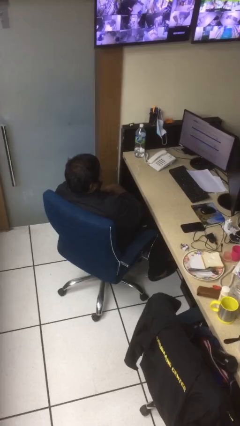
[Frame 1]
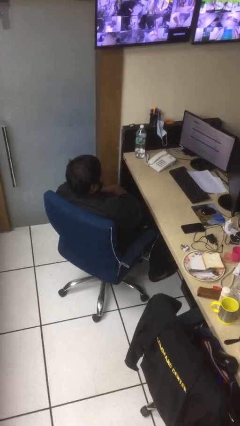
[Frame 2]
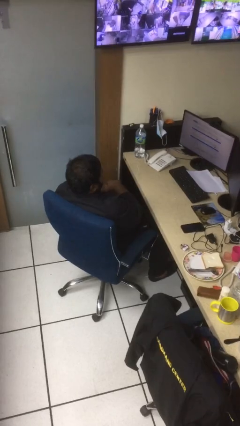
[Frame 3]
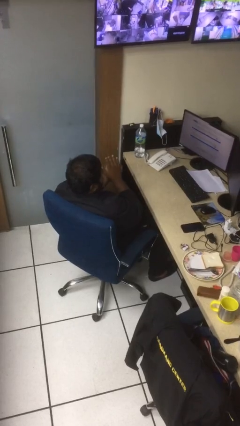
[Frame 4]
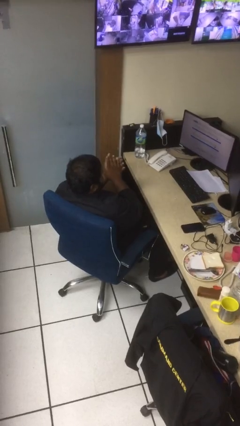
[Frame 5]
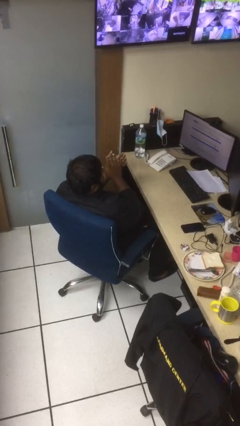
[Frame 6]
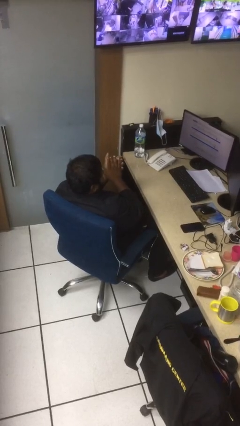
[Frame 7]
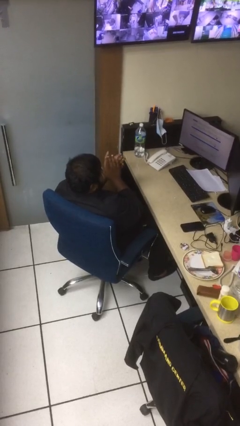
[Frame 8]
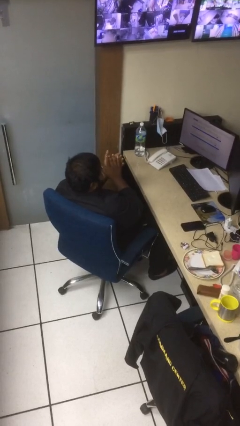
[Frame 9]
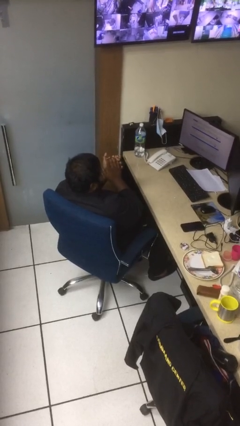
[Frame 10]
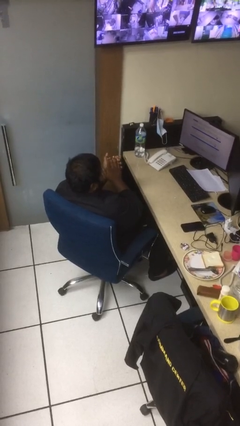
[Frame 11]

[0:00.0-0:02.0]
person claps hands

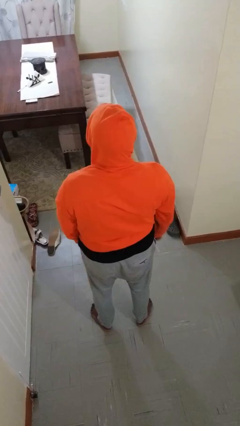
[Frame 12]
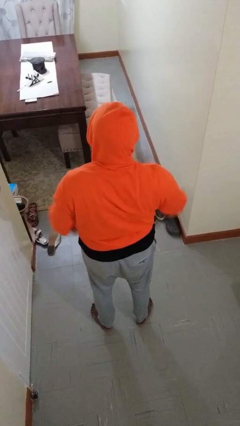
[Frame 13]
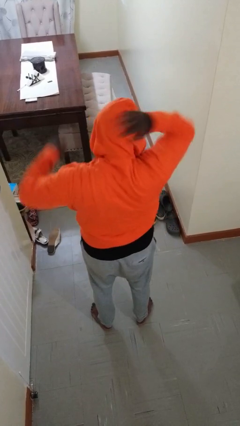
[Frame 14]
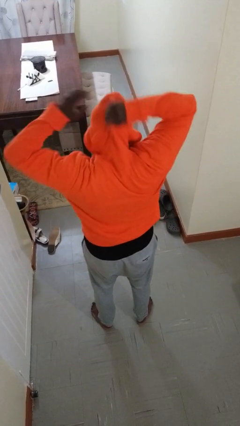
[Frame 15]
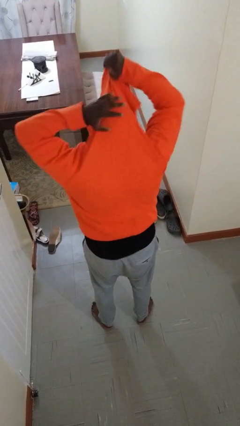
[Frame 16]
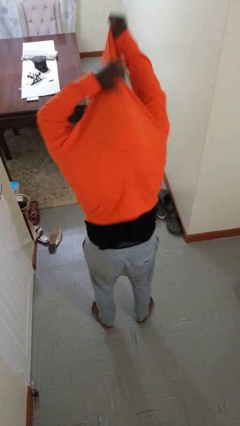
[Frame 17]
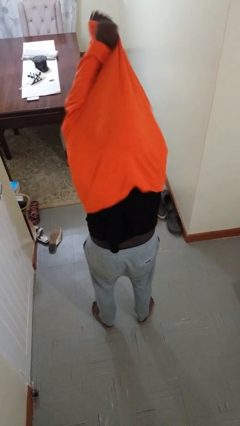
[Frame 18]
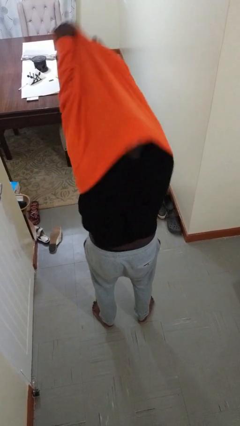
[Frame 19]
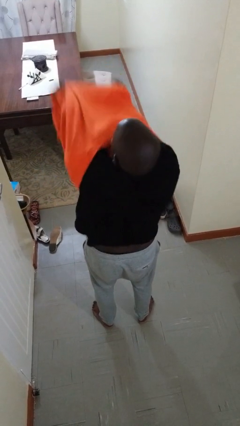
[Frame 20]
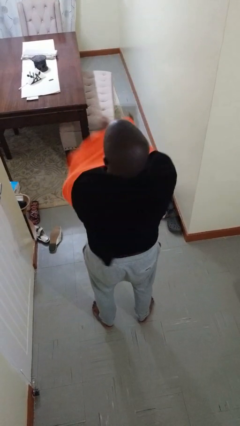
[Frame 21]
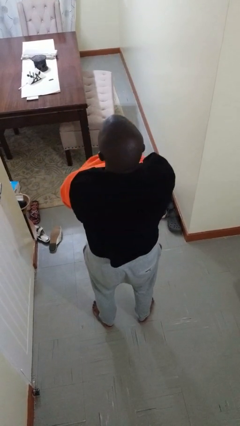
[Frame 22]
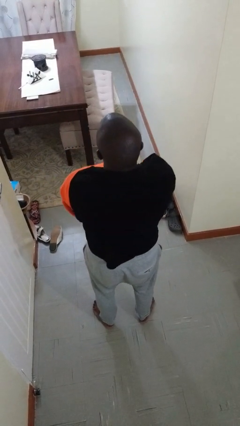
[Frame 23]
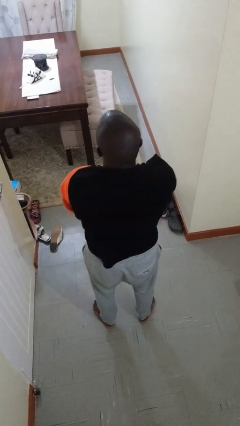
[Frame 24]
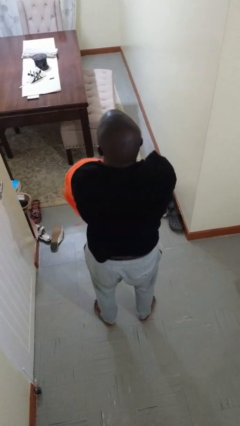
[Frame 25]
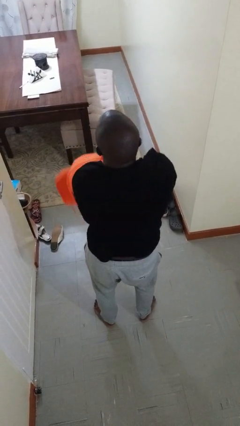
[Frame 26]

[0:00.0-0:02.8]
person takes off hoodie

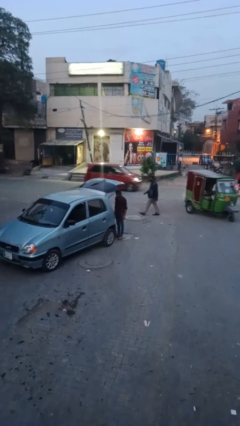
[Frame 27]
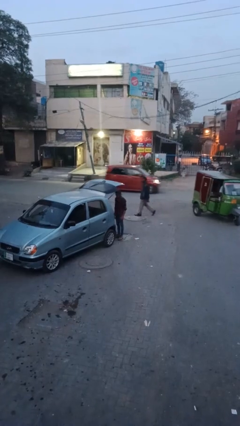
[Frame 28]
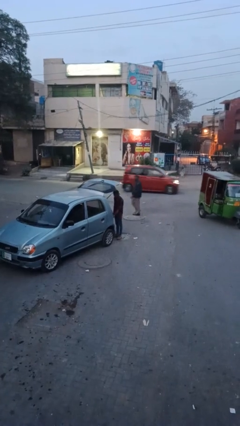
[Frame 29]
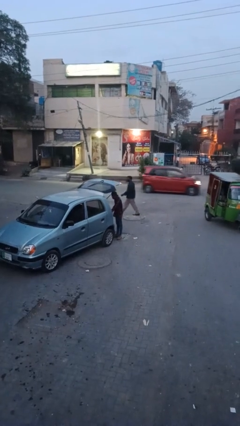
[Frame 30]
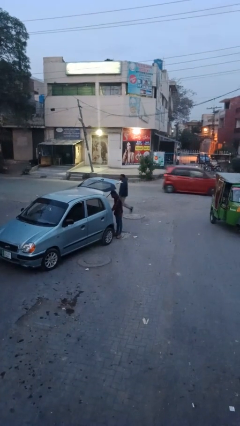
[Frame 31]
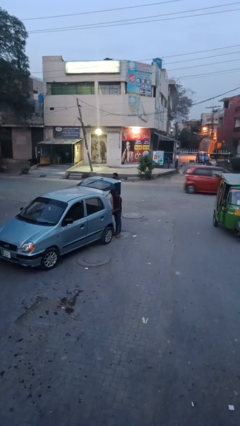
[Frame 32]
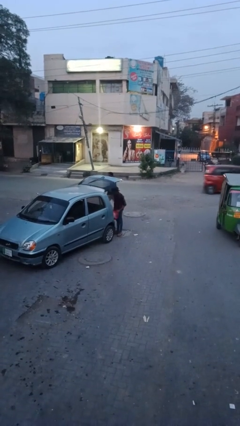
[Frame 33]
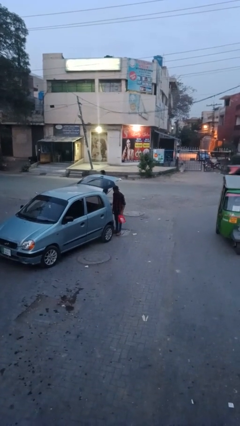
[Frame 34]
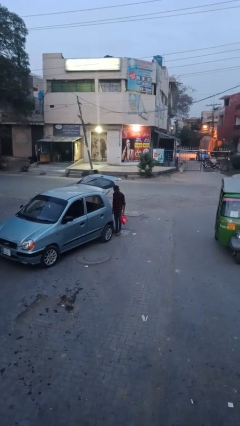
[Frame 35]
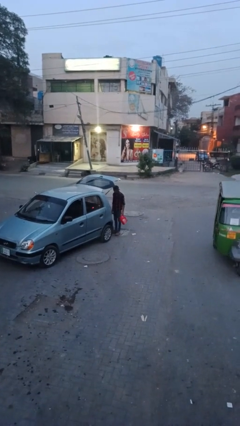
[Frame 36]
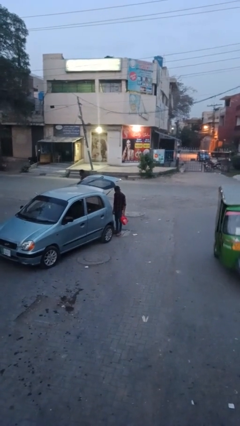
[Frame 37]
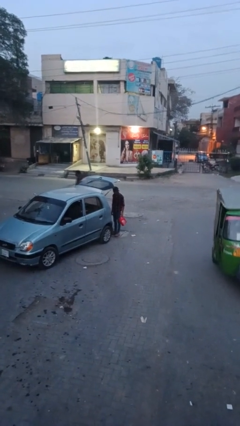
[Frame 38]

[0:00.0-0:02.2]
person unloads car

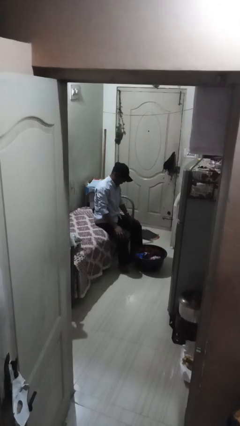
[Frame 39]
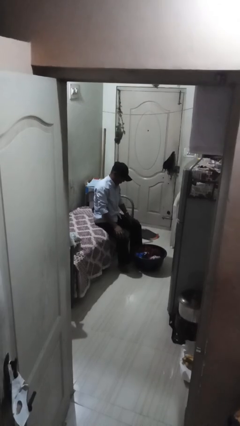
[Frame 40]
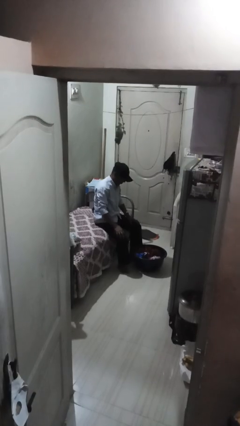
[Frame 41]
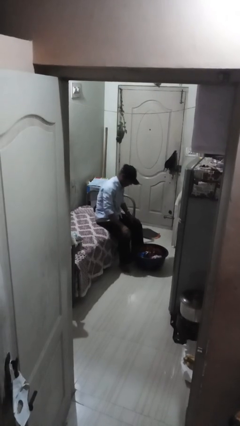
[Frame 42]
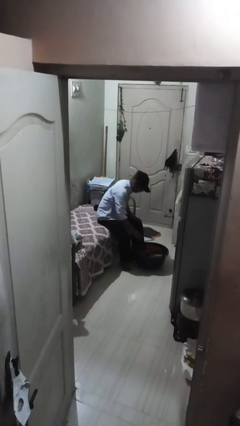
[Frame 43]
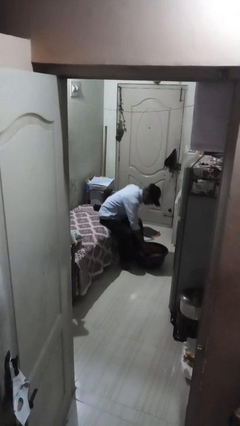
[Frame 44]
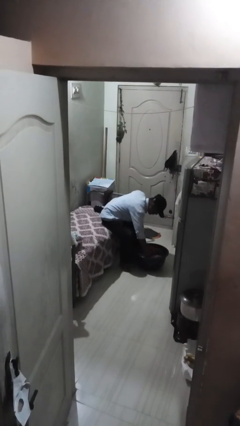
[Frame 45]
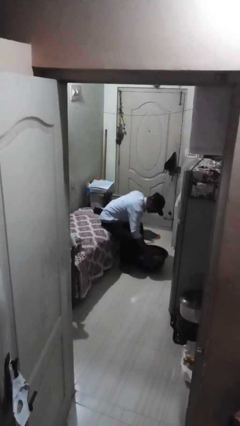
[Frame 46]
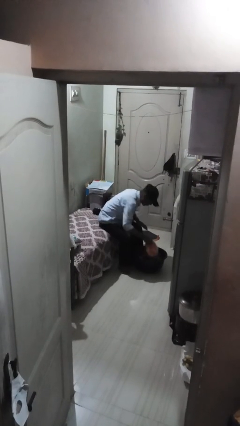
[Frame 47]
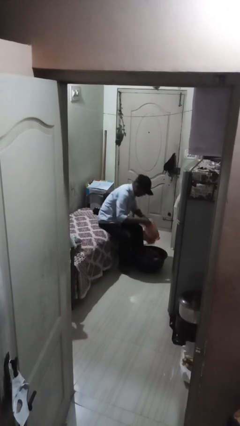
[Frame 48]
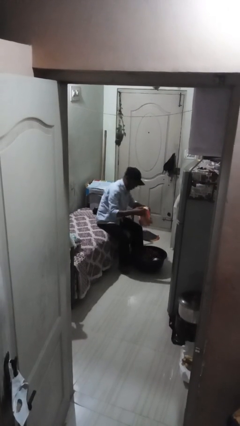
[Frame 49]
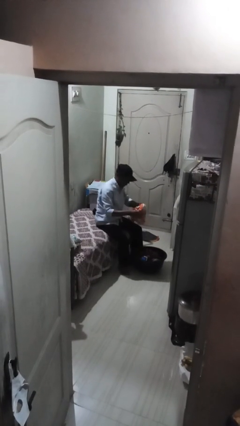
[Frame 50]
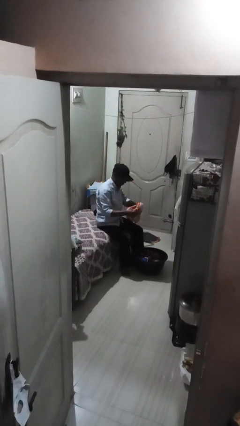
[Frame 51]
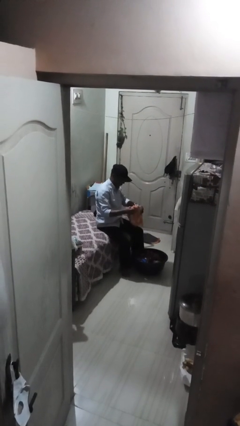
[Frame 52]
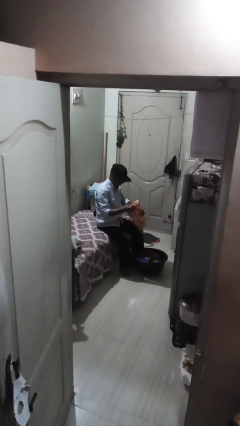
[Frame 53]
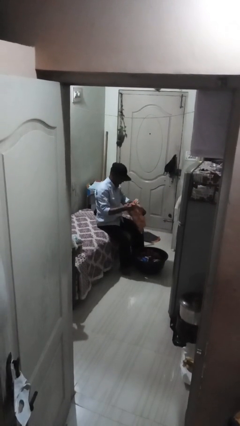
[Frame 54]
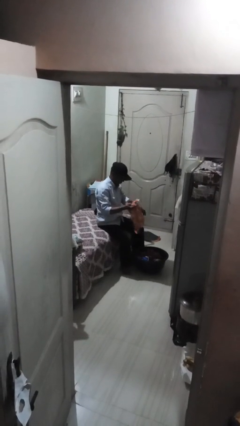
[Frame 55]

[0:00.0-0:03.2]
person takes object from basket

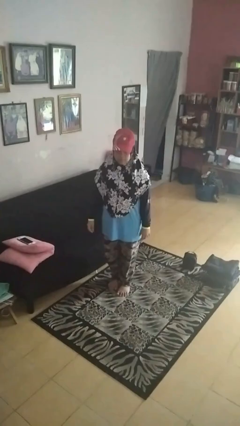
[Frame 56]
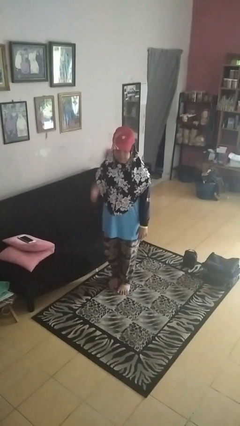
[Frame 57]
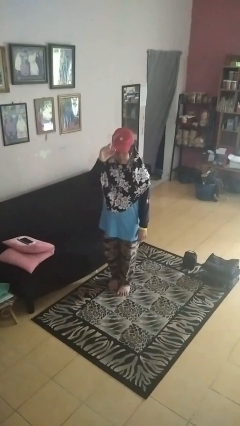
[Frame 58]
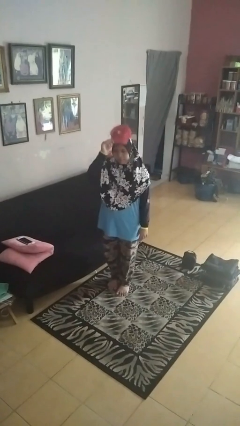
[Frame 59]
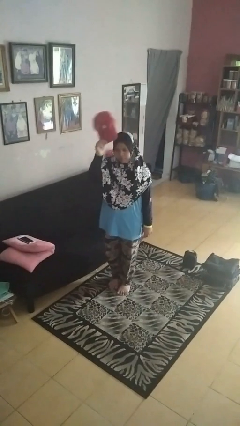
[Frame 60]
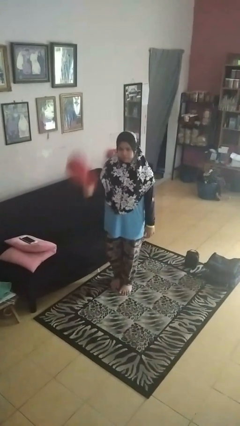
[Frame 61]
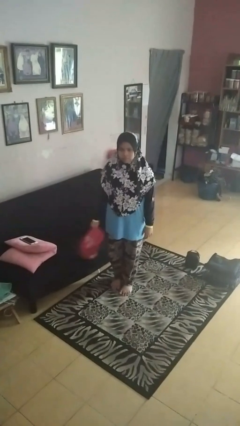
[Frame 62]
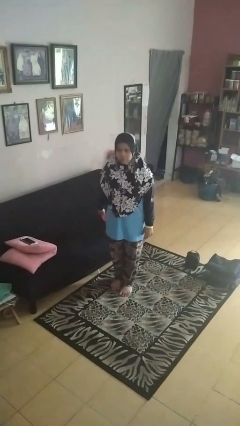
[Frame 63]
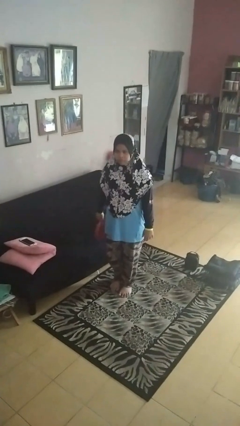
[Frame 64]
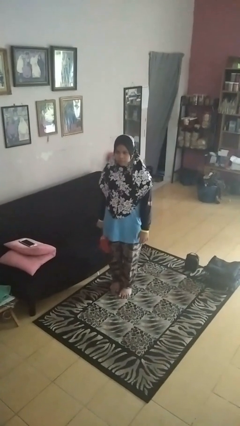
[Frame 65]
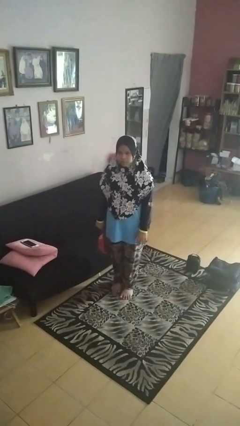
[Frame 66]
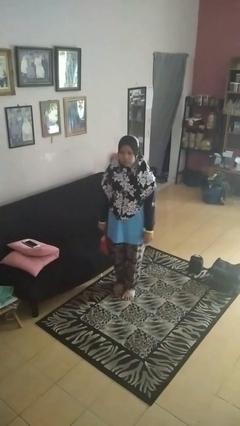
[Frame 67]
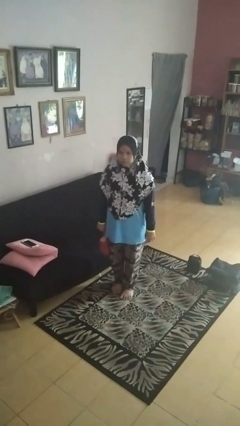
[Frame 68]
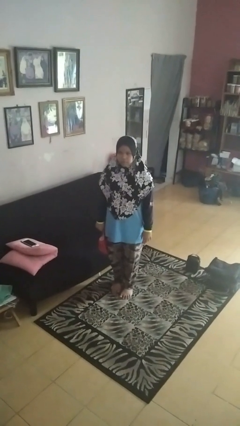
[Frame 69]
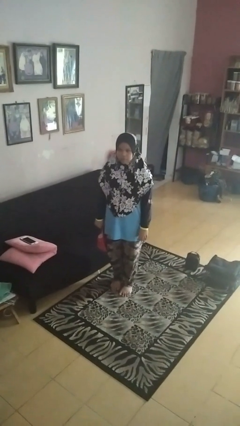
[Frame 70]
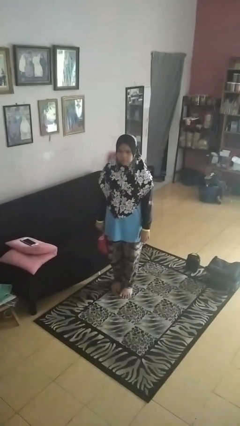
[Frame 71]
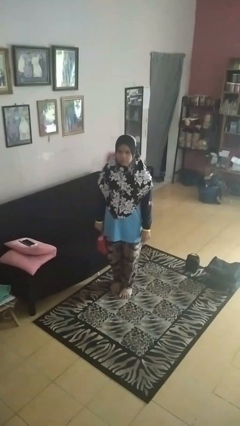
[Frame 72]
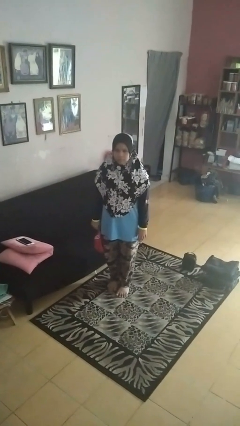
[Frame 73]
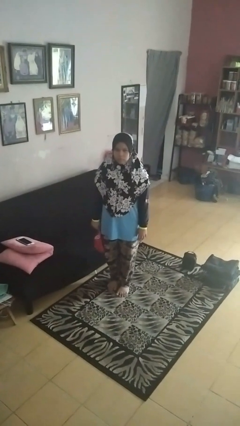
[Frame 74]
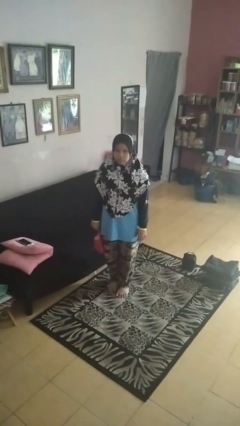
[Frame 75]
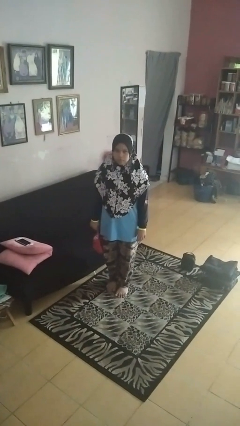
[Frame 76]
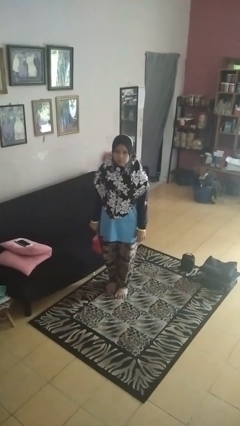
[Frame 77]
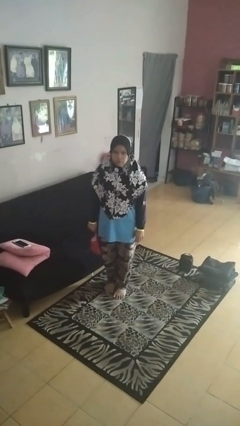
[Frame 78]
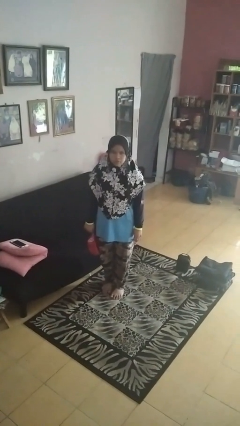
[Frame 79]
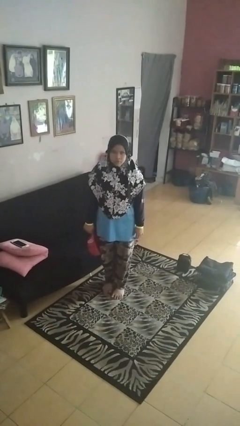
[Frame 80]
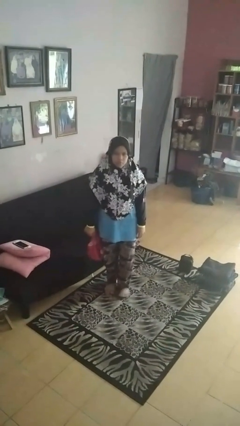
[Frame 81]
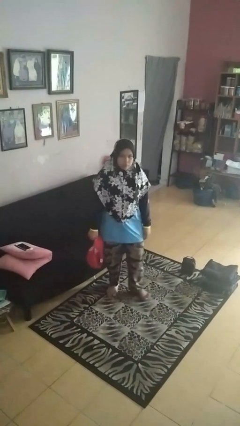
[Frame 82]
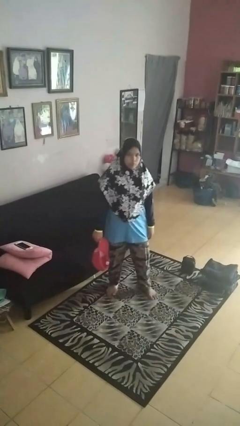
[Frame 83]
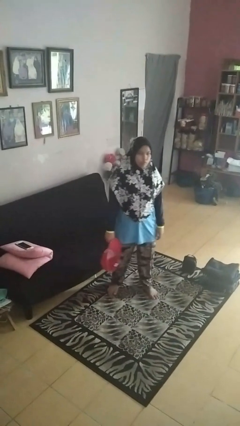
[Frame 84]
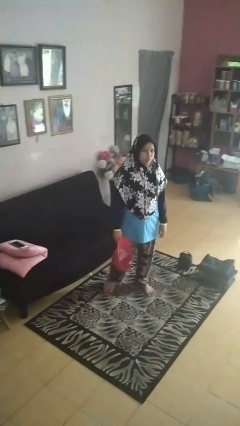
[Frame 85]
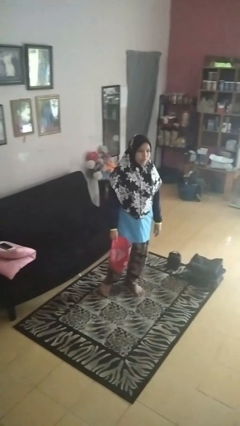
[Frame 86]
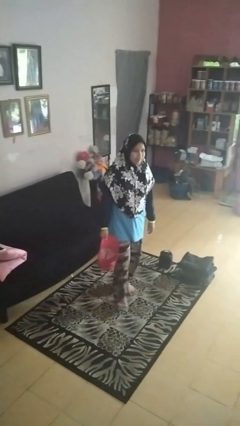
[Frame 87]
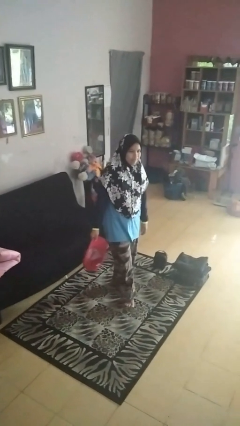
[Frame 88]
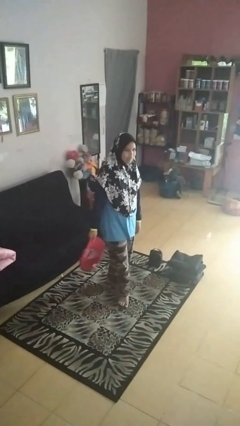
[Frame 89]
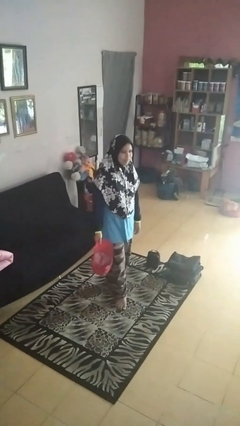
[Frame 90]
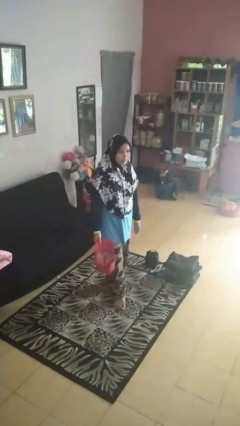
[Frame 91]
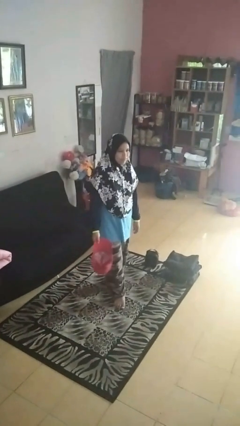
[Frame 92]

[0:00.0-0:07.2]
person takes off hat

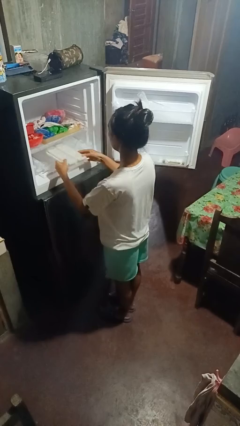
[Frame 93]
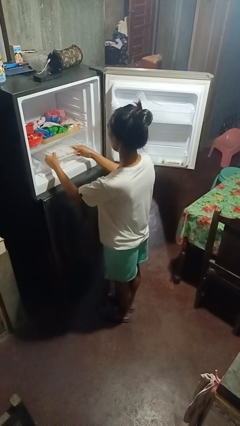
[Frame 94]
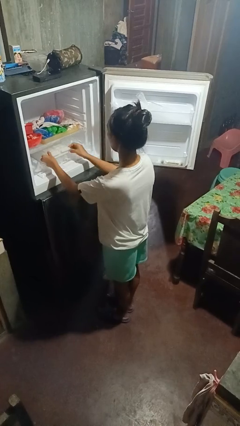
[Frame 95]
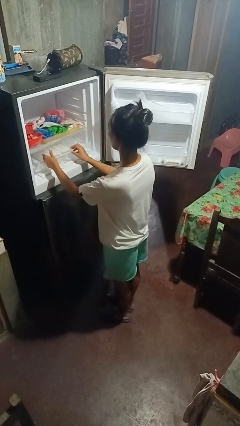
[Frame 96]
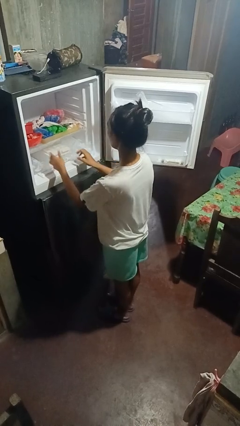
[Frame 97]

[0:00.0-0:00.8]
person puts object into refrigerator
